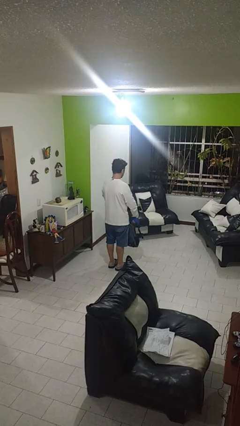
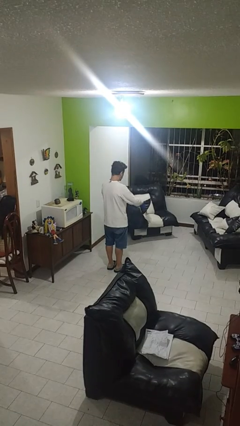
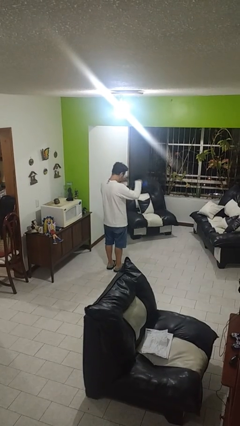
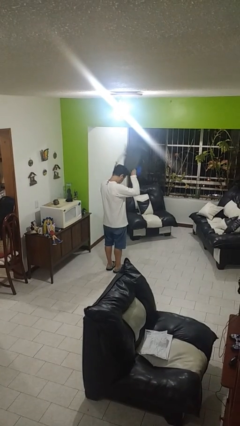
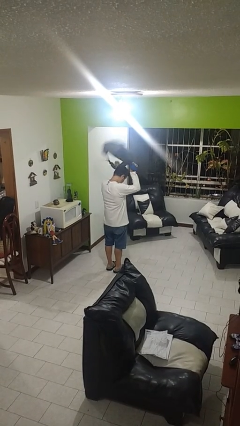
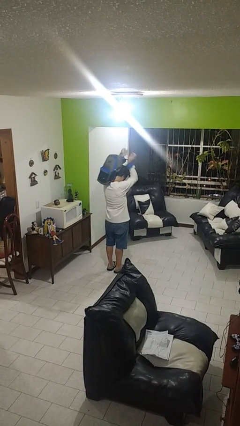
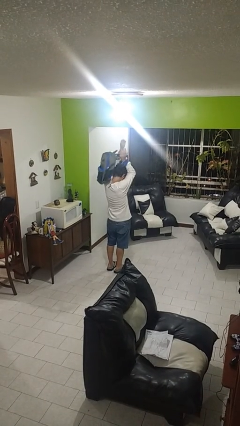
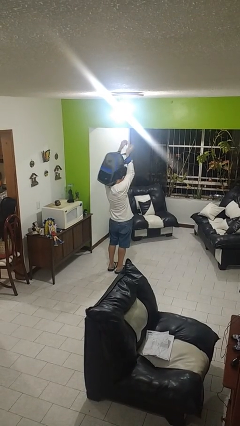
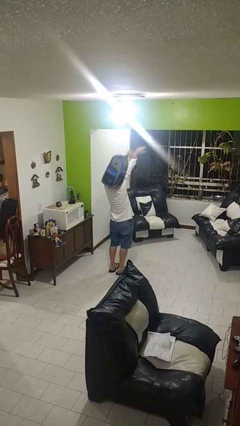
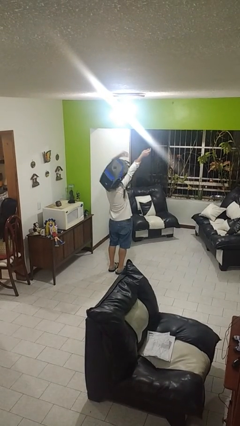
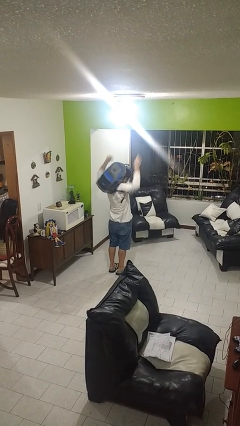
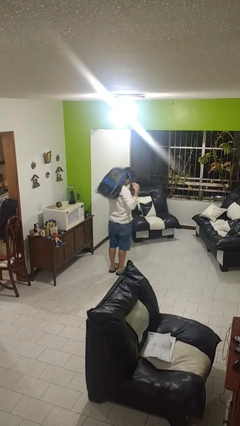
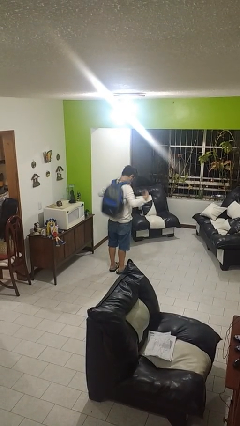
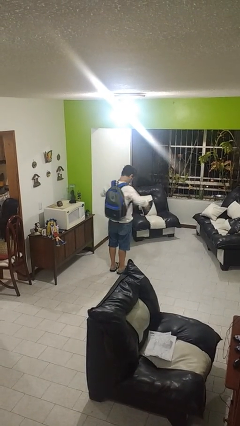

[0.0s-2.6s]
person puts on backpack

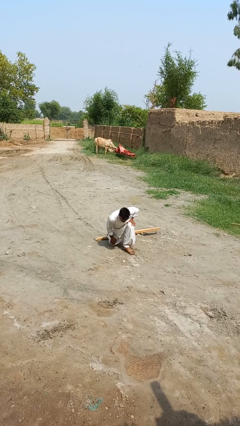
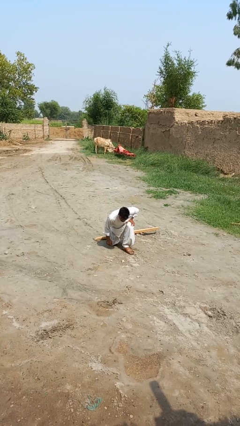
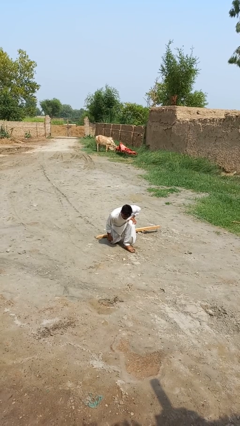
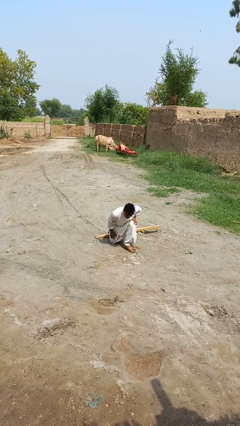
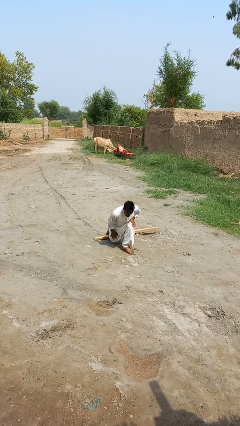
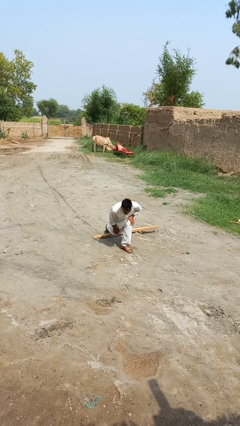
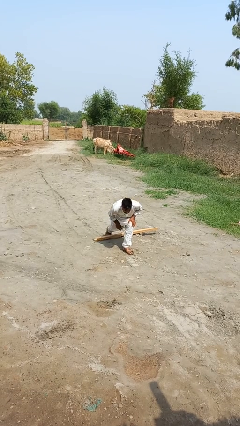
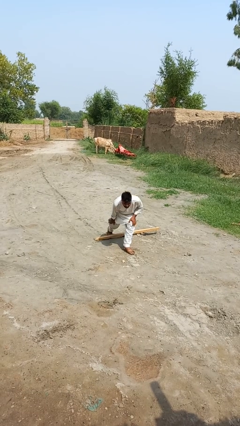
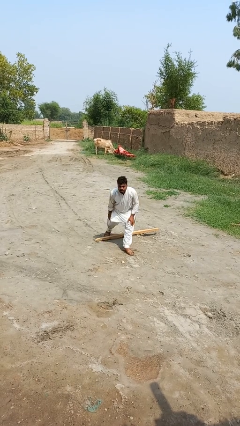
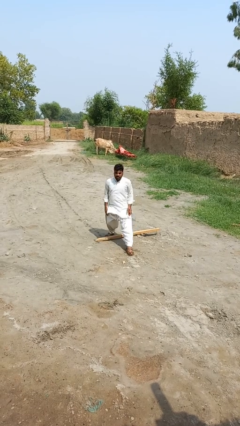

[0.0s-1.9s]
person stands up from floor

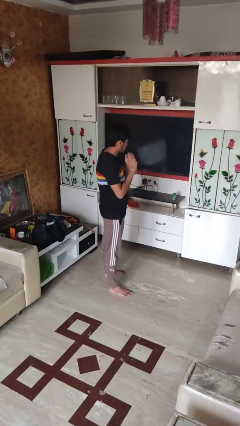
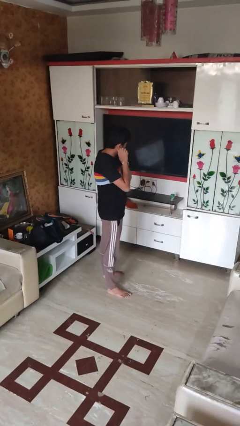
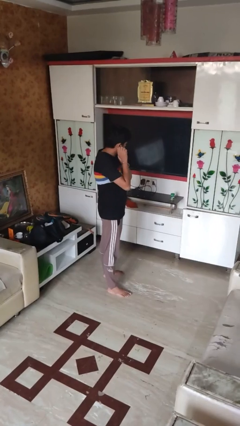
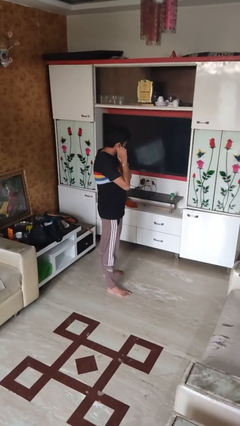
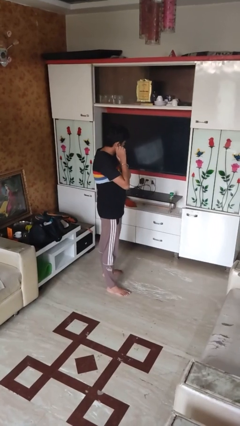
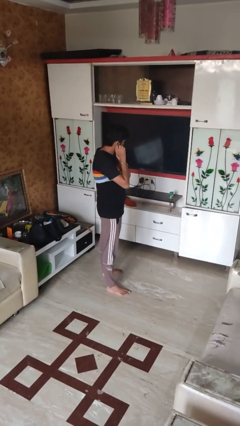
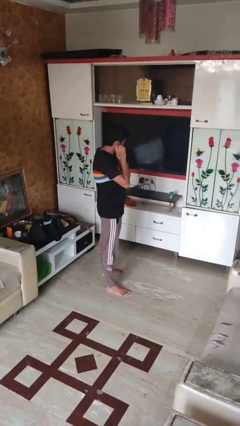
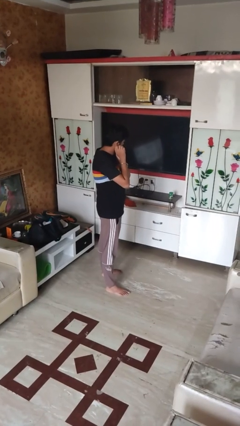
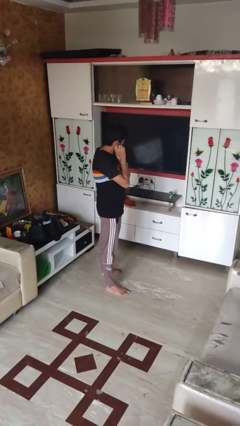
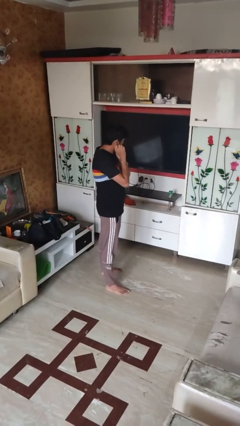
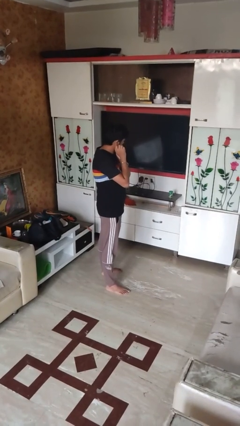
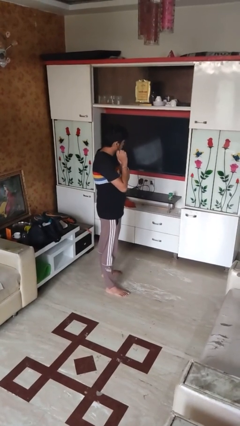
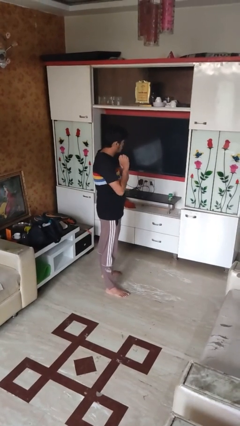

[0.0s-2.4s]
person puts on earrings

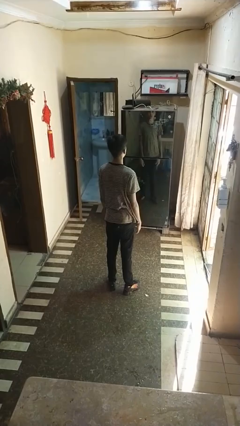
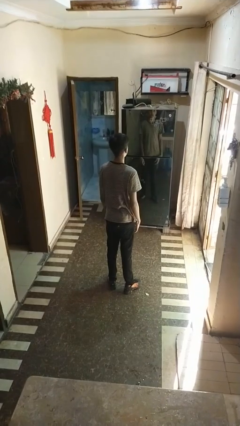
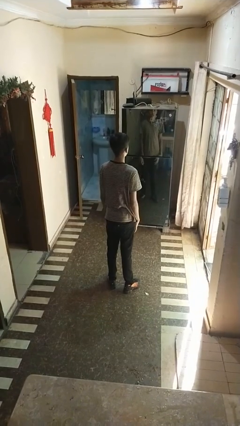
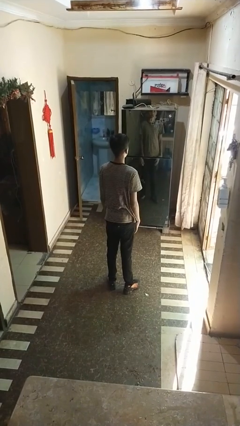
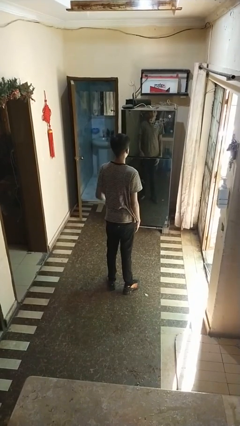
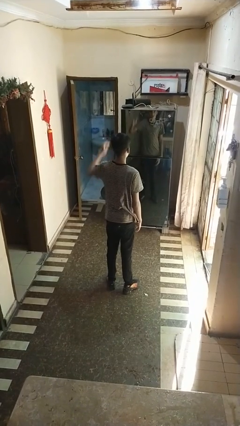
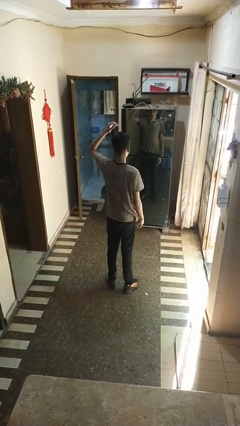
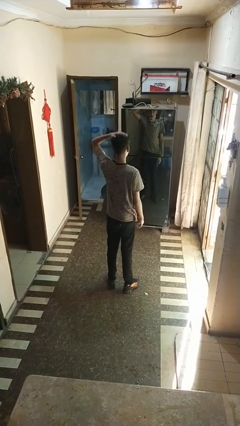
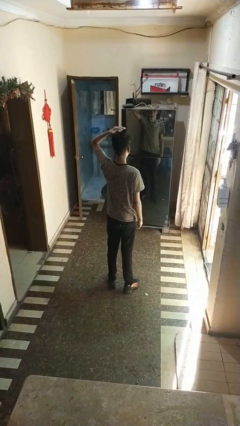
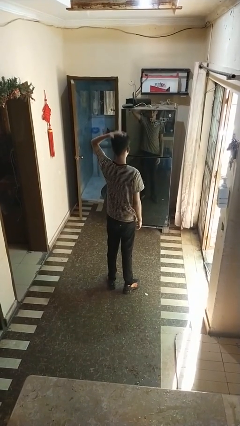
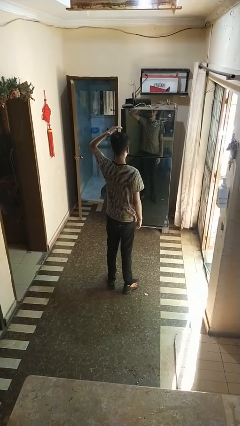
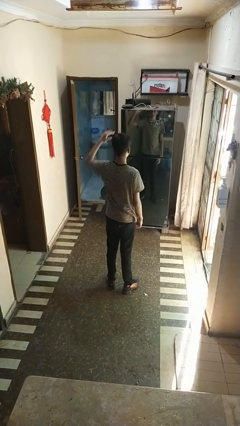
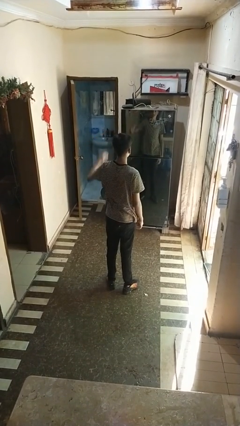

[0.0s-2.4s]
person pats head

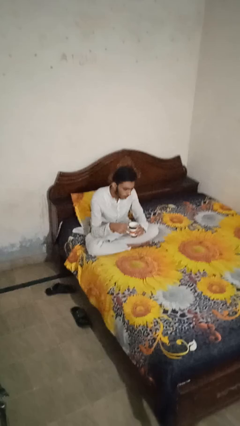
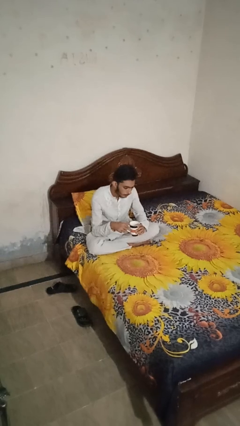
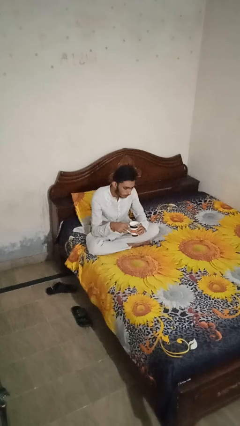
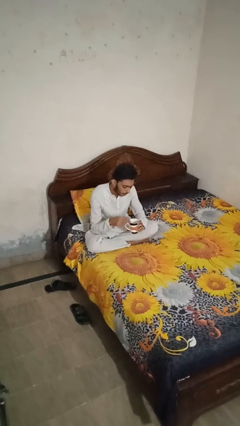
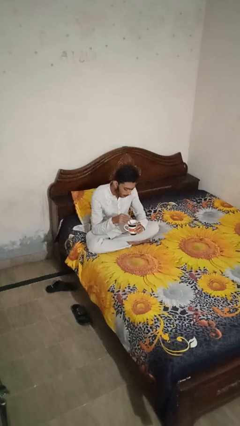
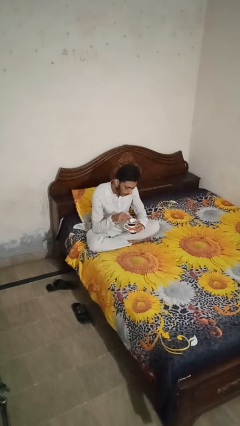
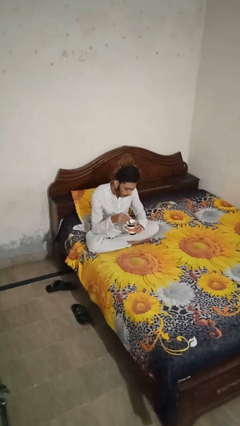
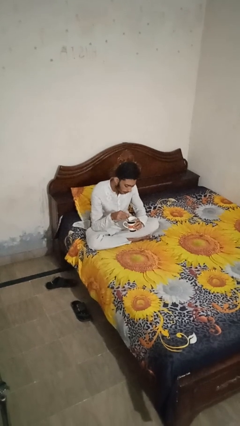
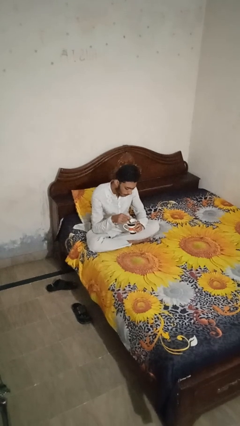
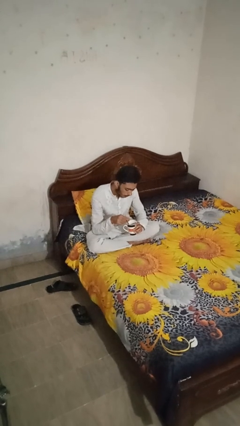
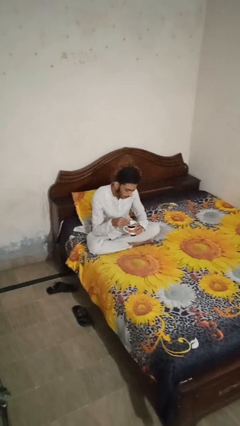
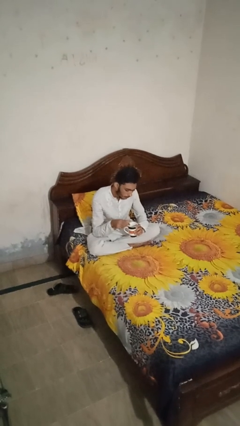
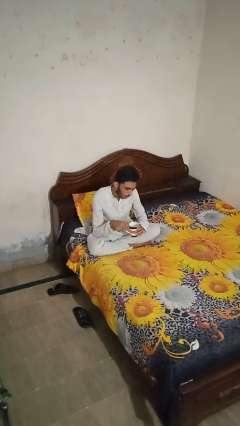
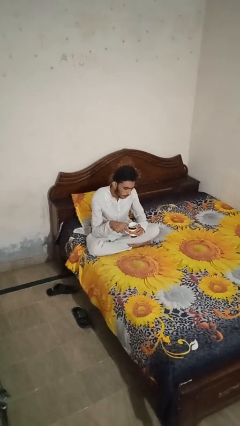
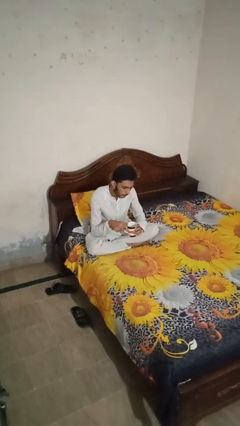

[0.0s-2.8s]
person stirs mug

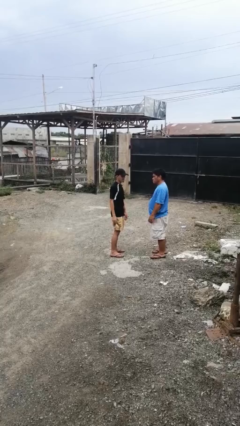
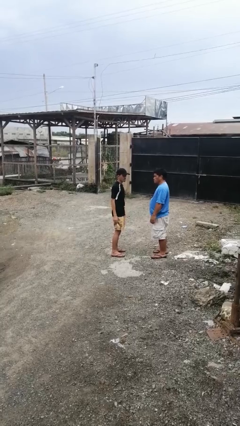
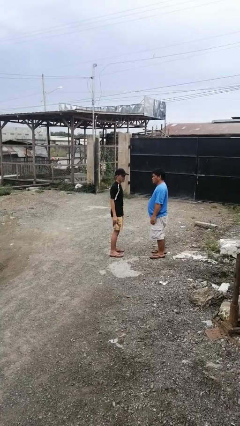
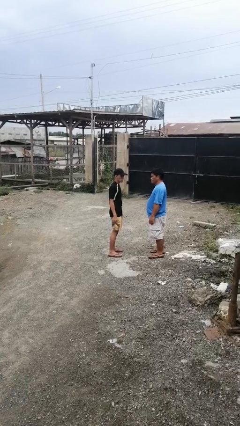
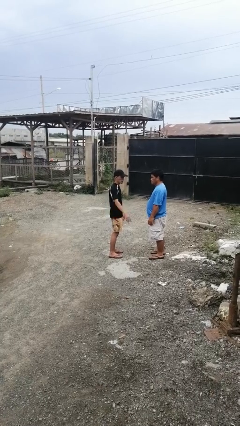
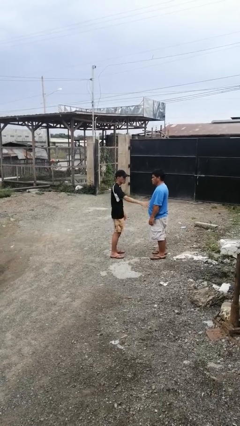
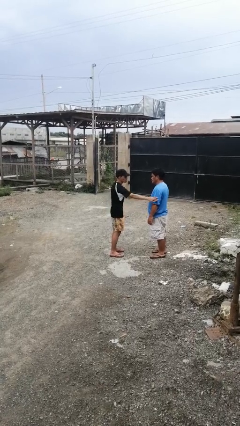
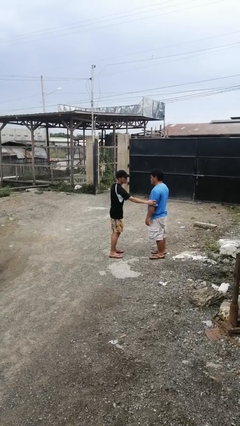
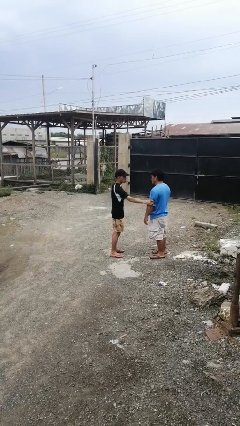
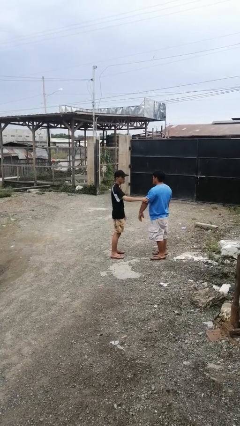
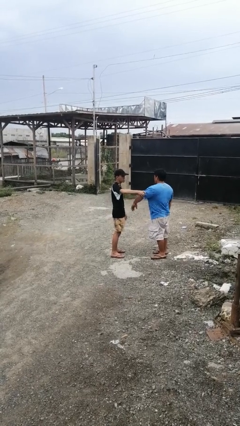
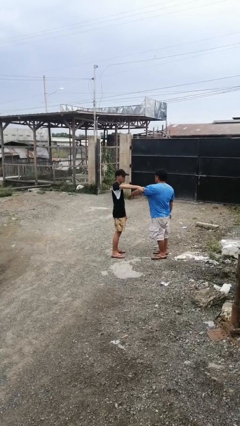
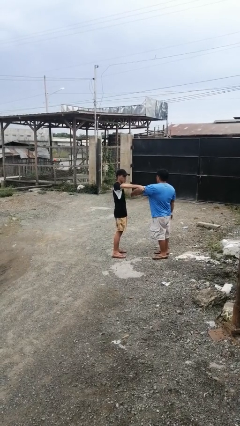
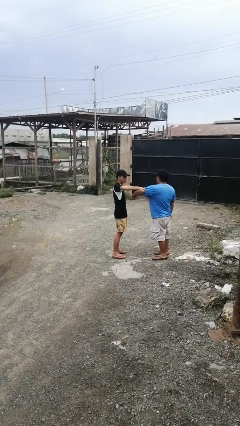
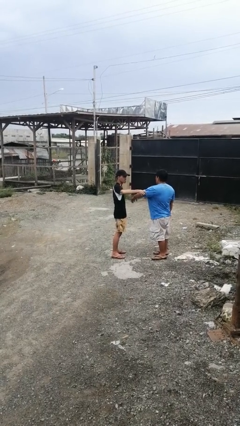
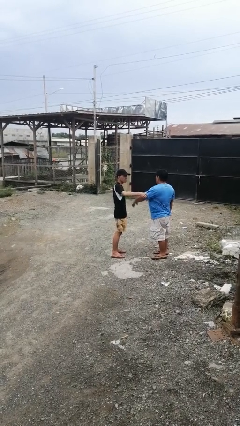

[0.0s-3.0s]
person grabs person by bicep

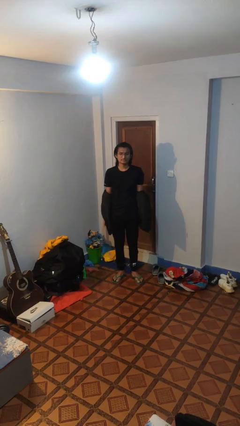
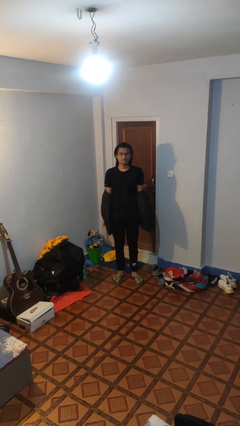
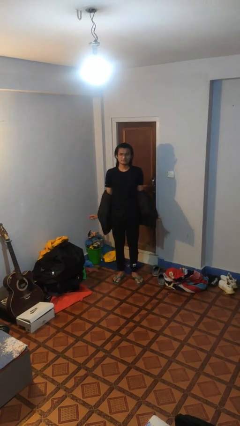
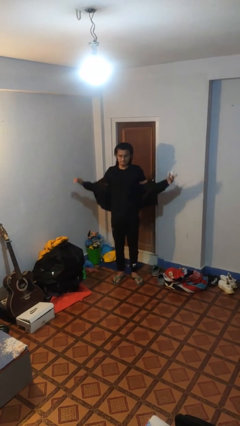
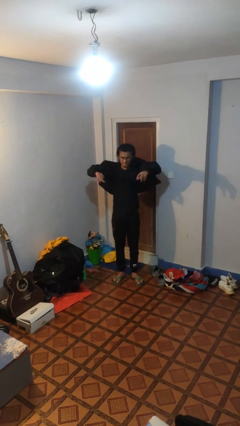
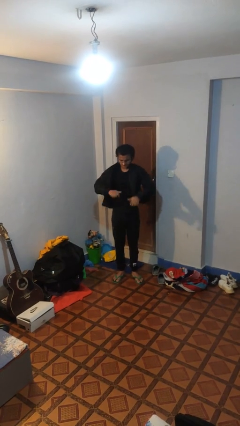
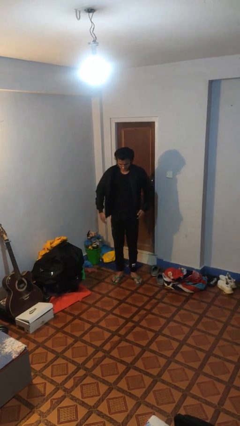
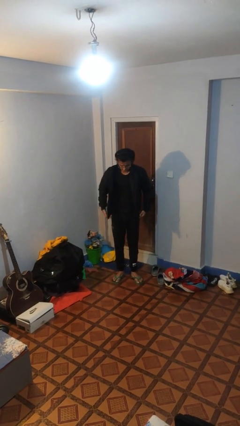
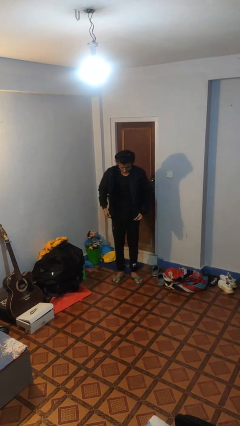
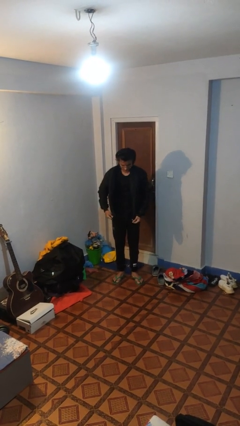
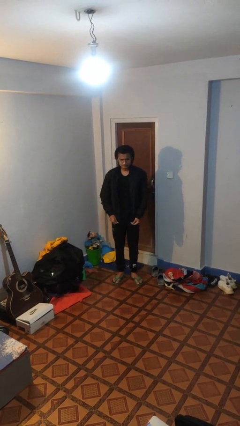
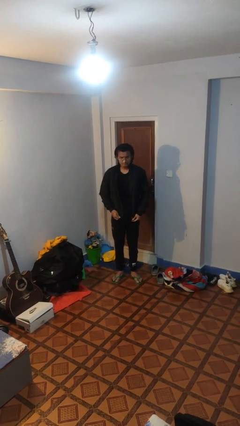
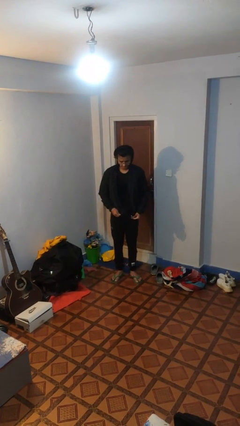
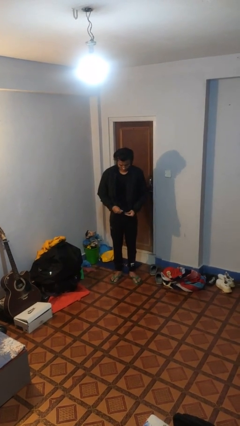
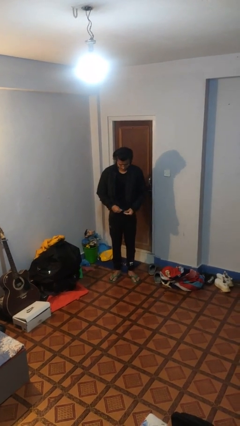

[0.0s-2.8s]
person puts on jacket
